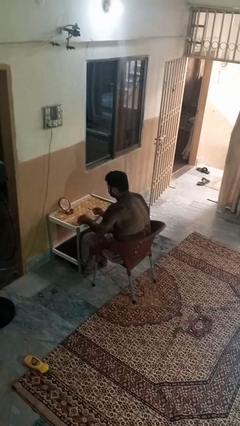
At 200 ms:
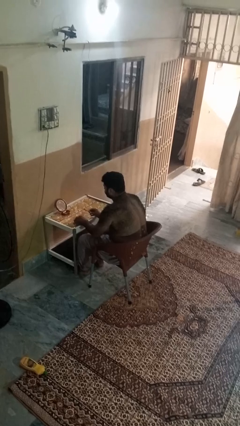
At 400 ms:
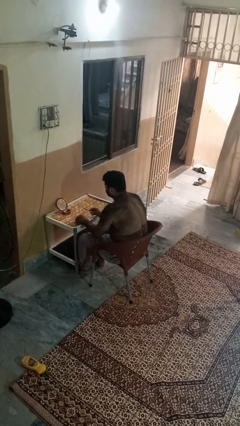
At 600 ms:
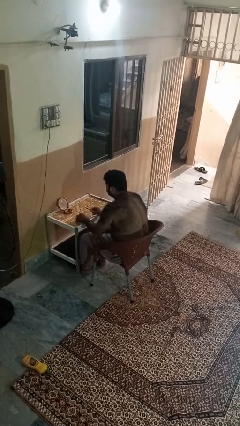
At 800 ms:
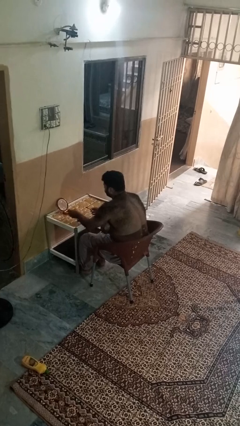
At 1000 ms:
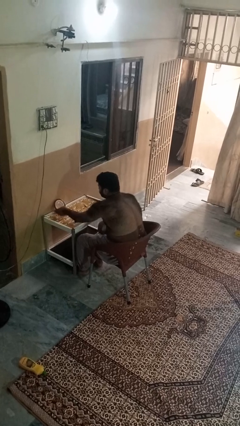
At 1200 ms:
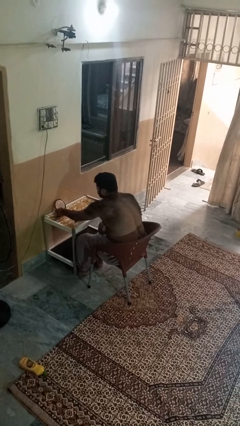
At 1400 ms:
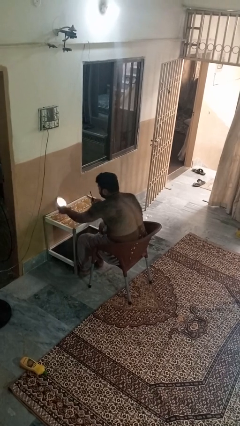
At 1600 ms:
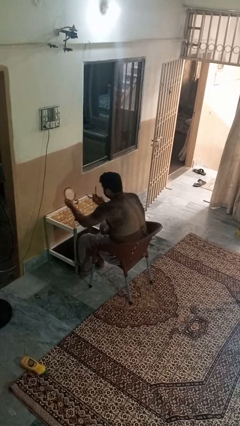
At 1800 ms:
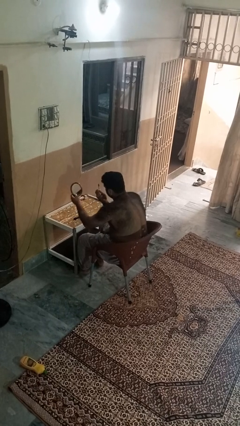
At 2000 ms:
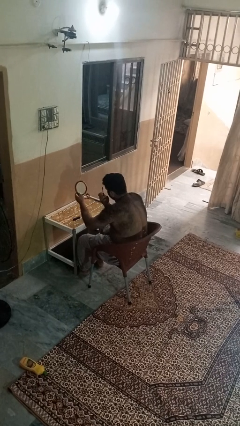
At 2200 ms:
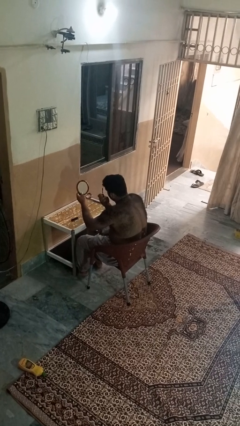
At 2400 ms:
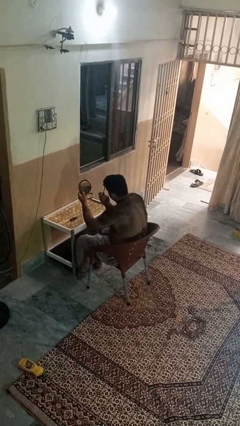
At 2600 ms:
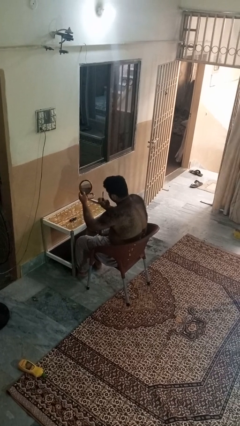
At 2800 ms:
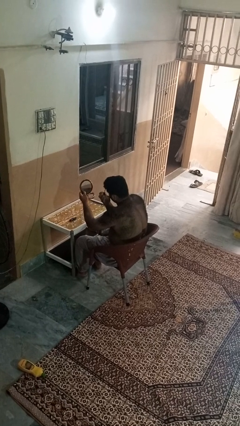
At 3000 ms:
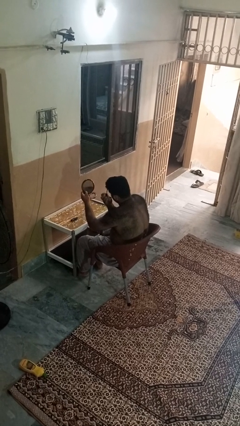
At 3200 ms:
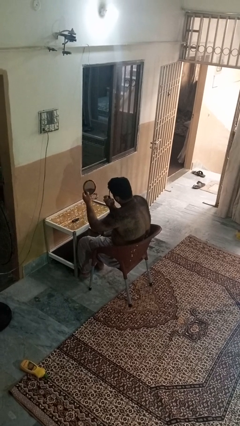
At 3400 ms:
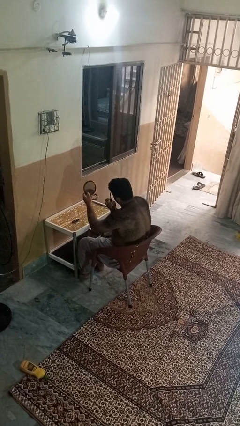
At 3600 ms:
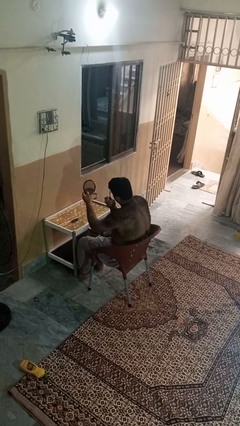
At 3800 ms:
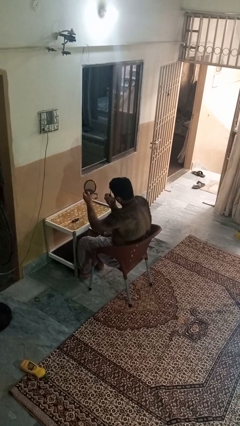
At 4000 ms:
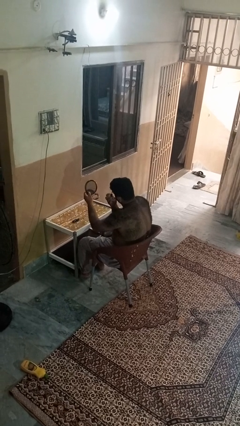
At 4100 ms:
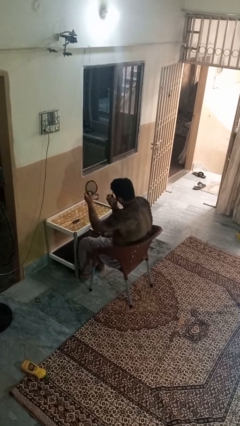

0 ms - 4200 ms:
person applies eye makeup

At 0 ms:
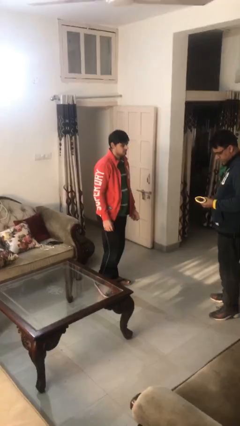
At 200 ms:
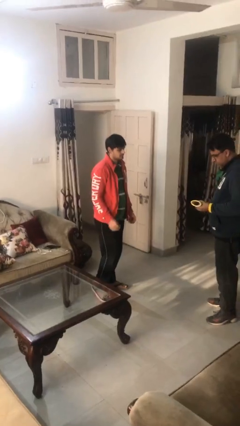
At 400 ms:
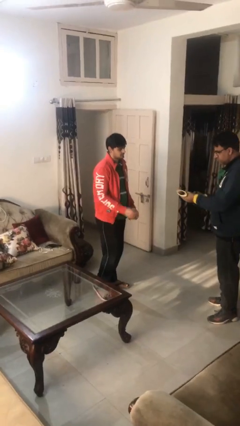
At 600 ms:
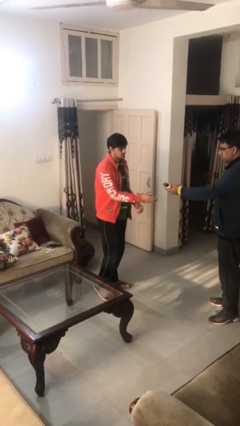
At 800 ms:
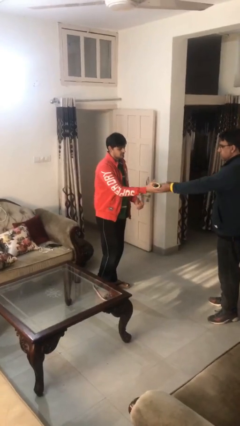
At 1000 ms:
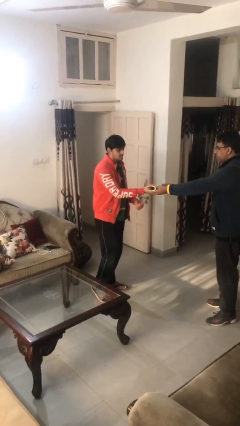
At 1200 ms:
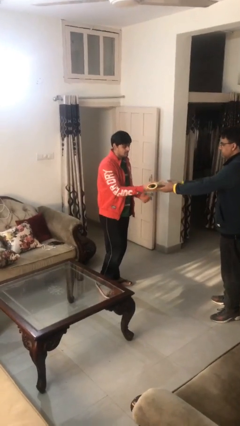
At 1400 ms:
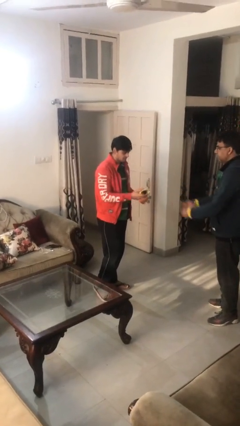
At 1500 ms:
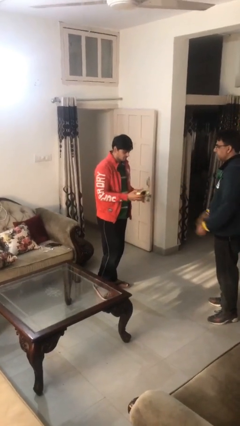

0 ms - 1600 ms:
person transfers object to person

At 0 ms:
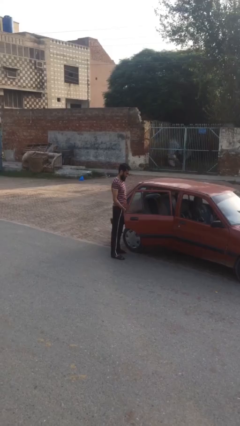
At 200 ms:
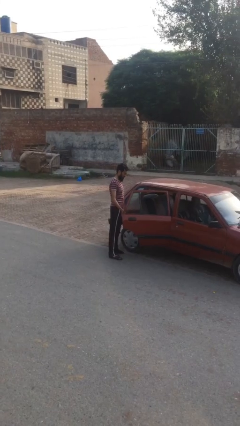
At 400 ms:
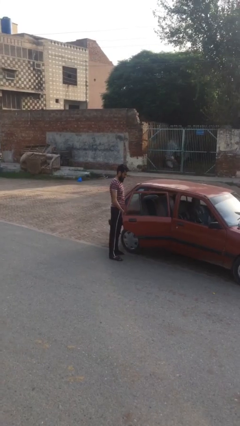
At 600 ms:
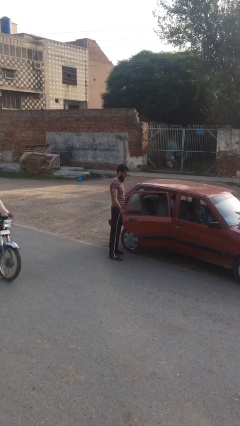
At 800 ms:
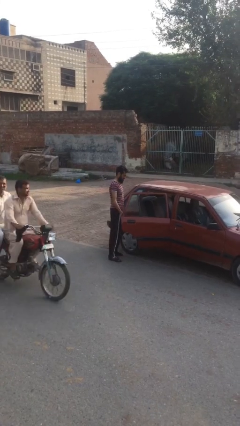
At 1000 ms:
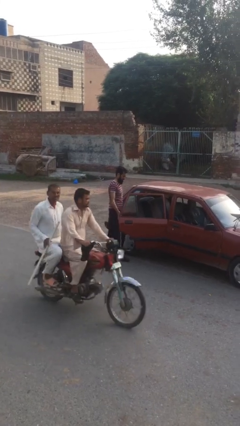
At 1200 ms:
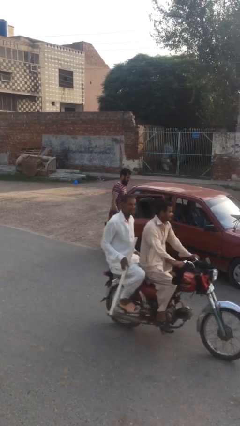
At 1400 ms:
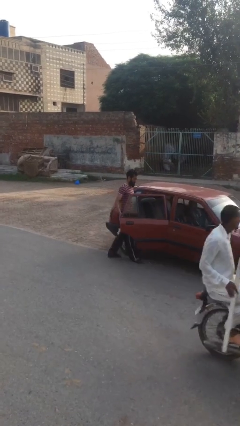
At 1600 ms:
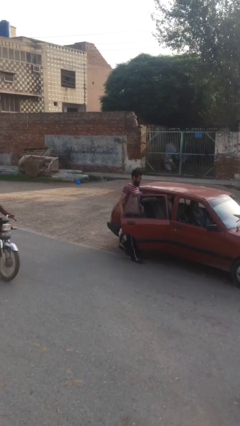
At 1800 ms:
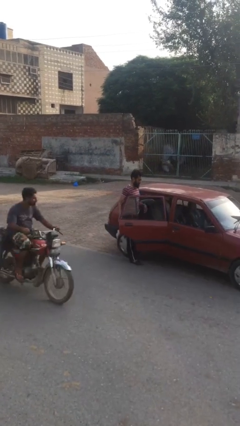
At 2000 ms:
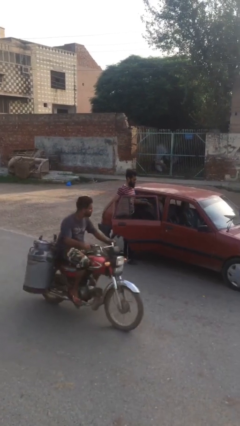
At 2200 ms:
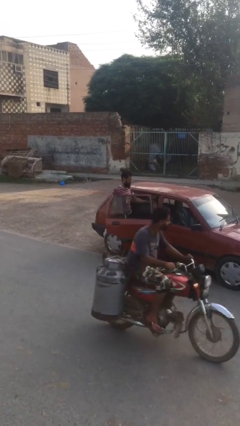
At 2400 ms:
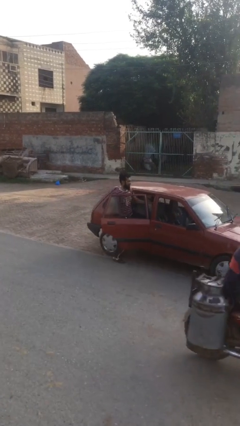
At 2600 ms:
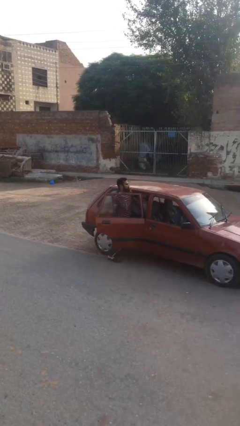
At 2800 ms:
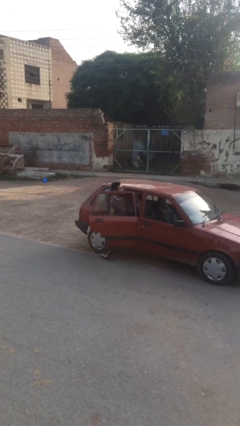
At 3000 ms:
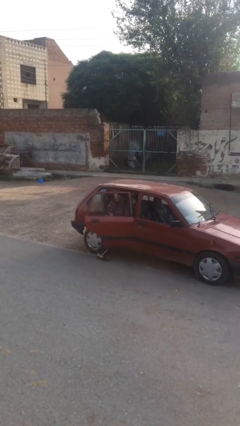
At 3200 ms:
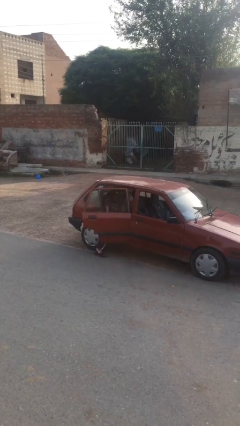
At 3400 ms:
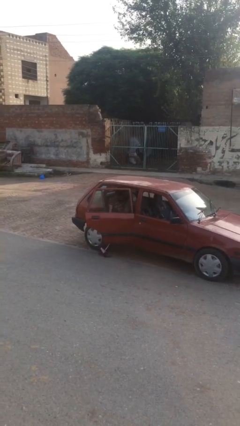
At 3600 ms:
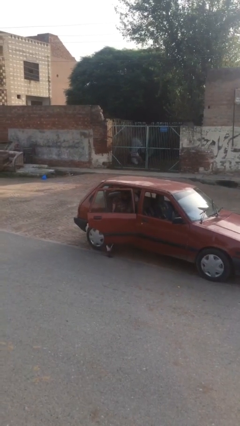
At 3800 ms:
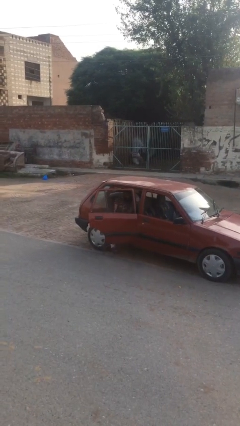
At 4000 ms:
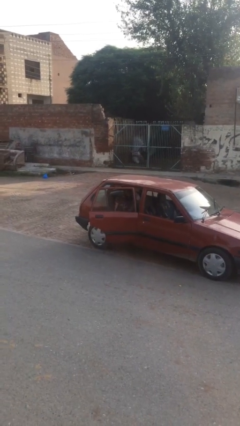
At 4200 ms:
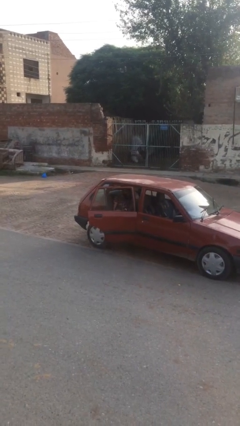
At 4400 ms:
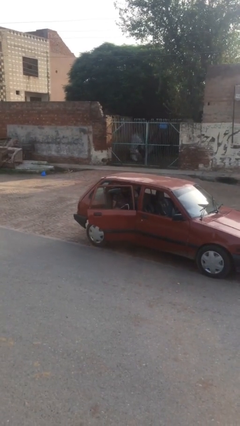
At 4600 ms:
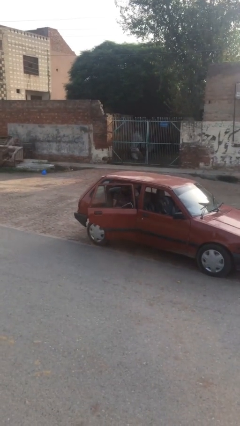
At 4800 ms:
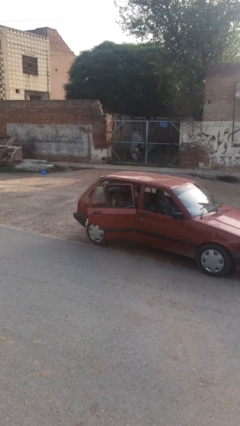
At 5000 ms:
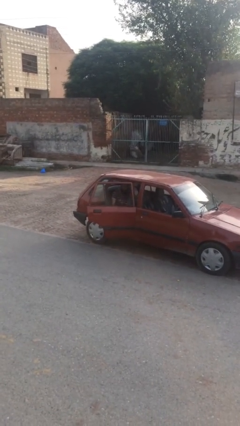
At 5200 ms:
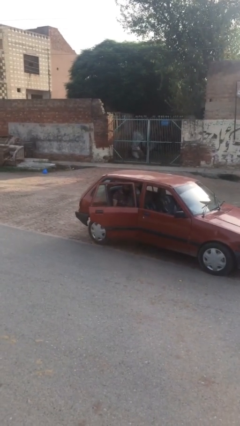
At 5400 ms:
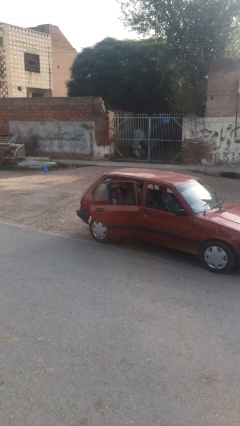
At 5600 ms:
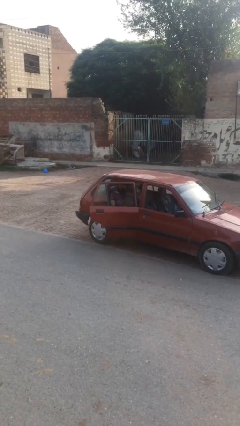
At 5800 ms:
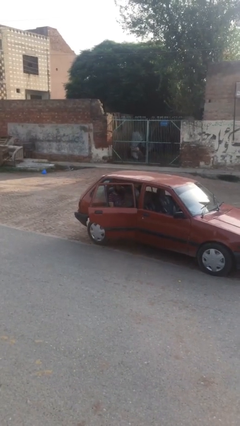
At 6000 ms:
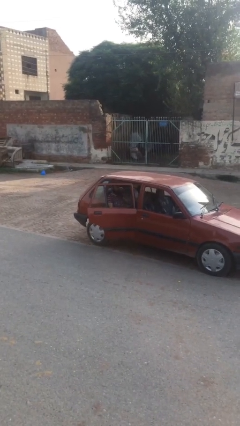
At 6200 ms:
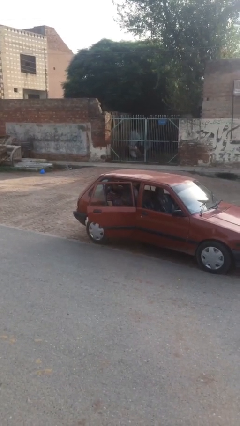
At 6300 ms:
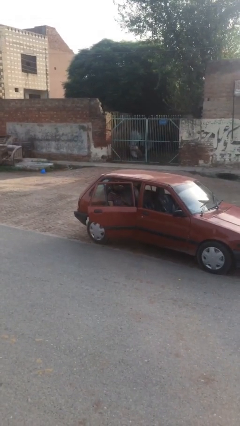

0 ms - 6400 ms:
person enters car

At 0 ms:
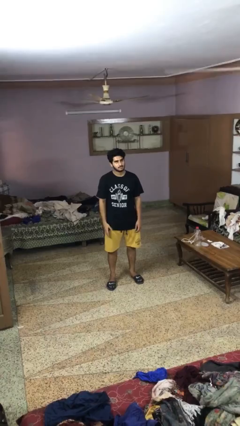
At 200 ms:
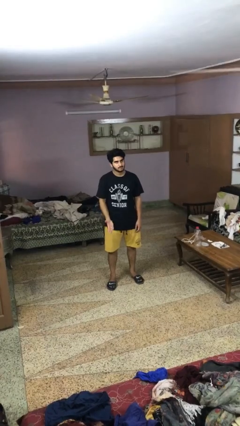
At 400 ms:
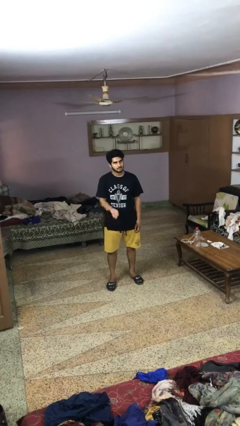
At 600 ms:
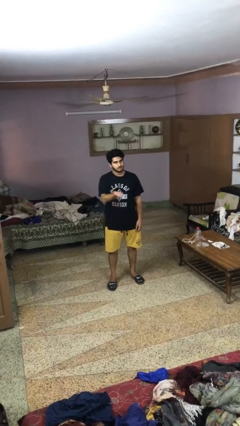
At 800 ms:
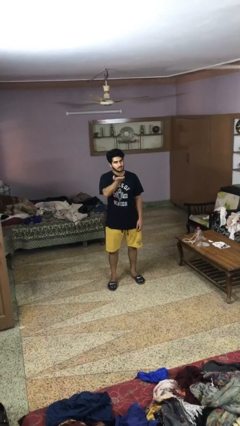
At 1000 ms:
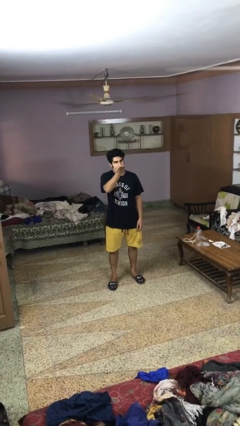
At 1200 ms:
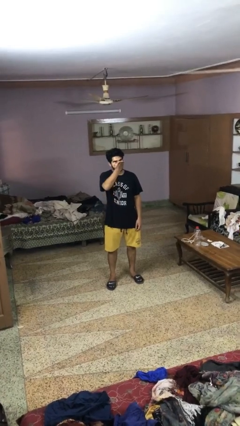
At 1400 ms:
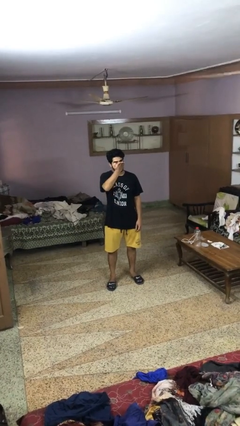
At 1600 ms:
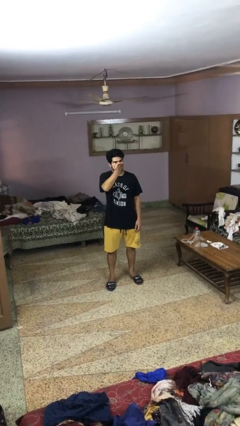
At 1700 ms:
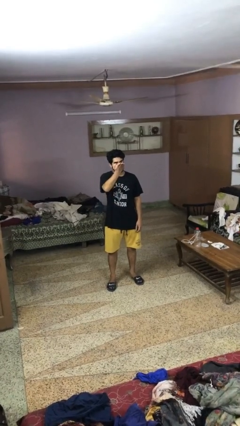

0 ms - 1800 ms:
person gestures swipe up

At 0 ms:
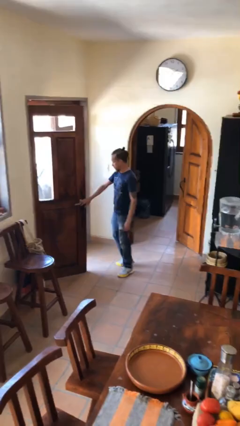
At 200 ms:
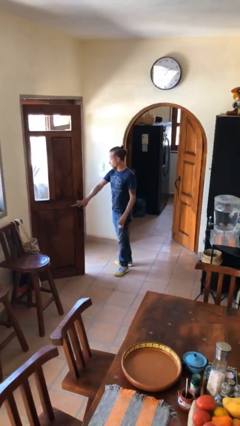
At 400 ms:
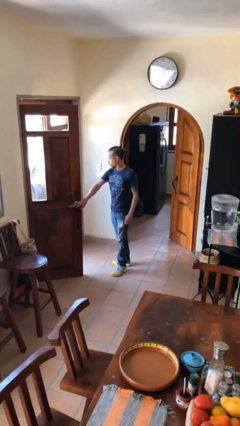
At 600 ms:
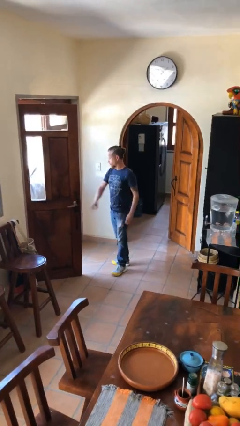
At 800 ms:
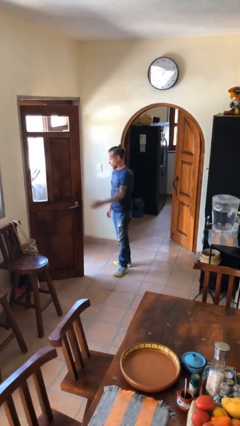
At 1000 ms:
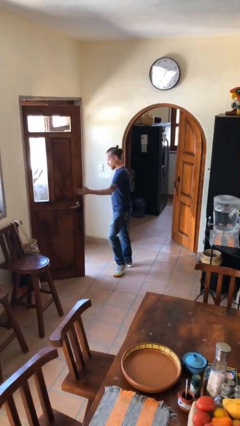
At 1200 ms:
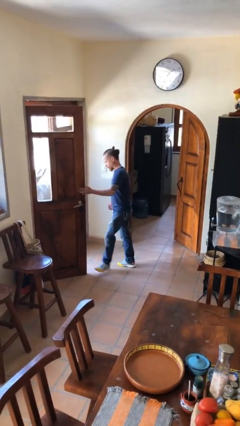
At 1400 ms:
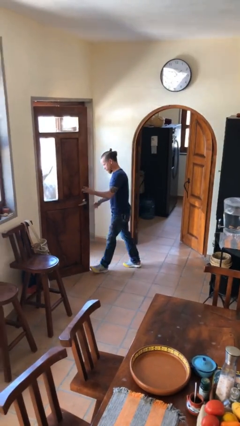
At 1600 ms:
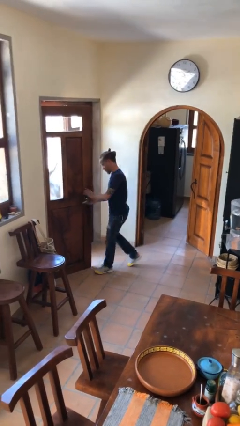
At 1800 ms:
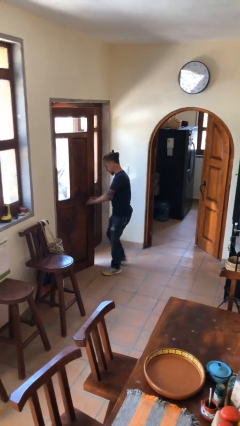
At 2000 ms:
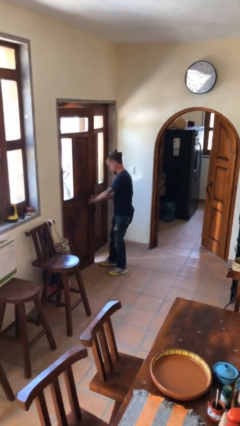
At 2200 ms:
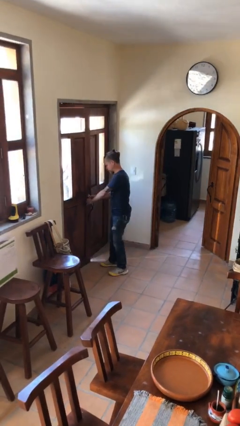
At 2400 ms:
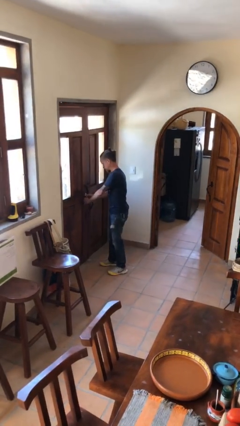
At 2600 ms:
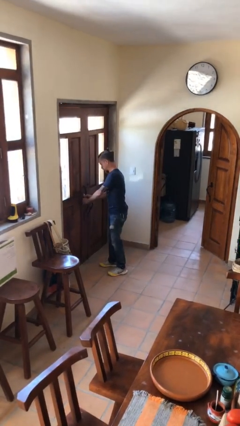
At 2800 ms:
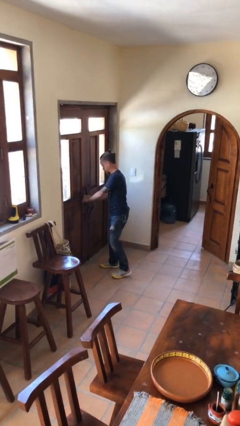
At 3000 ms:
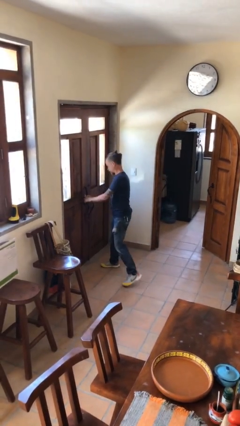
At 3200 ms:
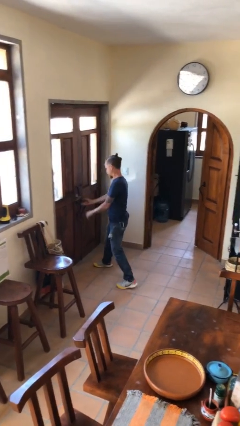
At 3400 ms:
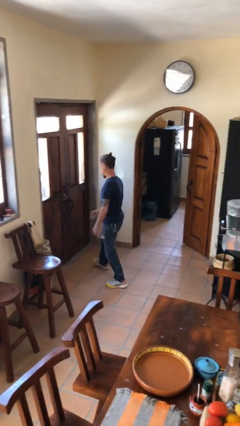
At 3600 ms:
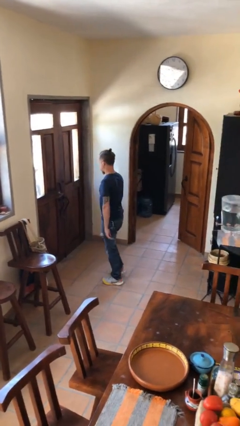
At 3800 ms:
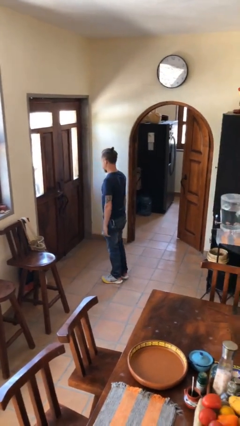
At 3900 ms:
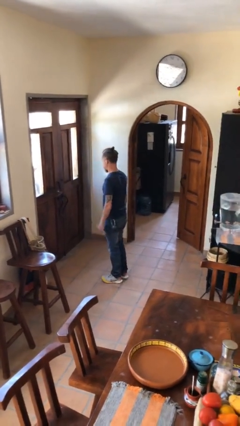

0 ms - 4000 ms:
person closes facility door
